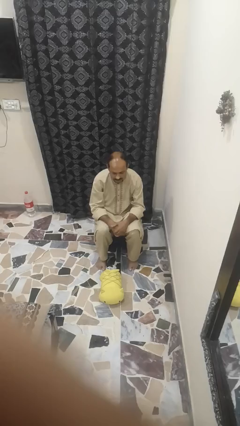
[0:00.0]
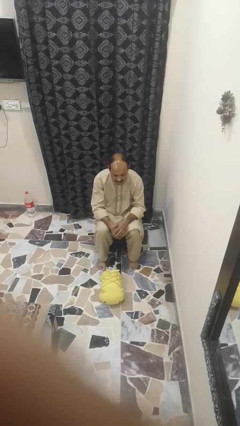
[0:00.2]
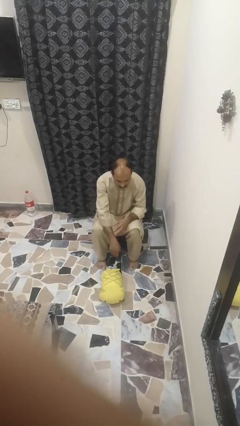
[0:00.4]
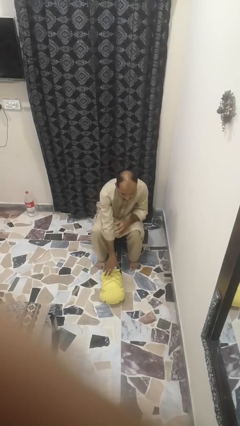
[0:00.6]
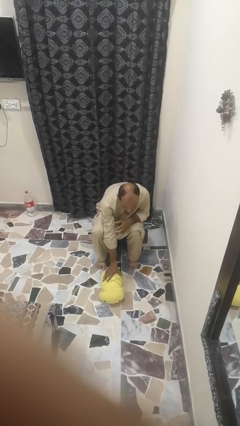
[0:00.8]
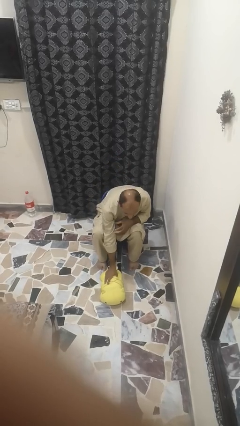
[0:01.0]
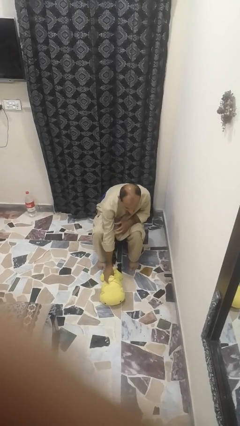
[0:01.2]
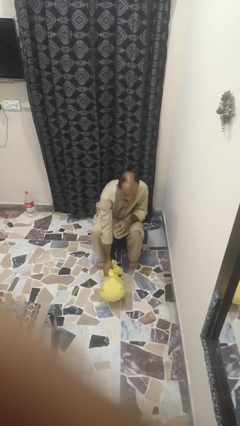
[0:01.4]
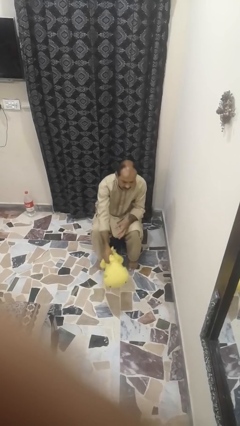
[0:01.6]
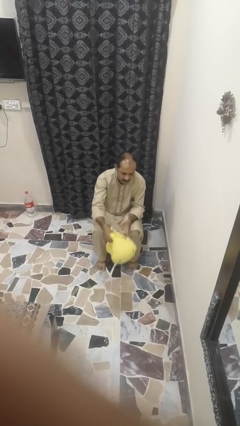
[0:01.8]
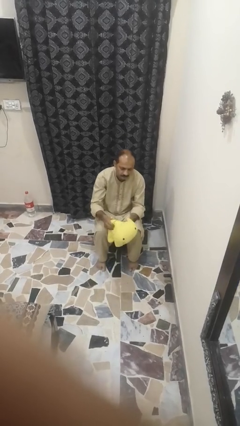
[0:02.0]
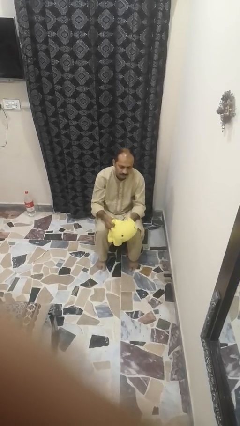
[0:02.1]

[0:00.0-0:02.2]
person picks up object from floor

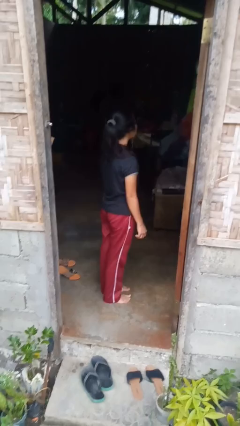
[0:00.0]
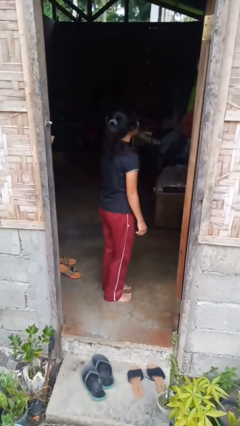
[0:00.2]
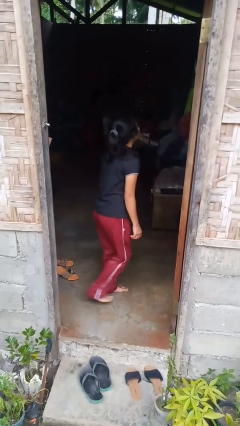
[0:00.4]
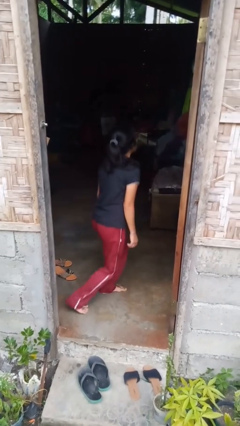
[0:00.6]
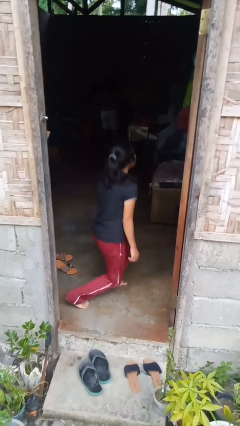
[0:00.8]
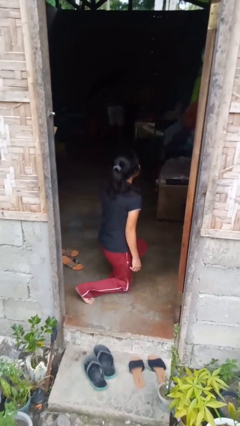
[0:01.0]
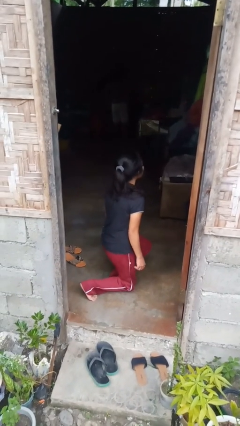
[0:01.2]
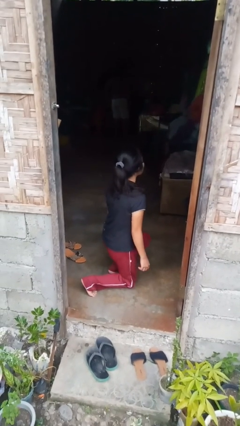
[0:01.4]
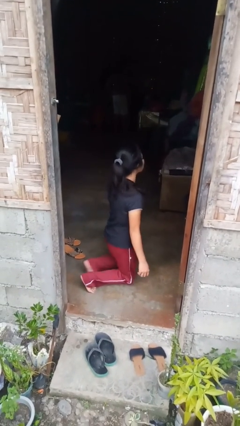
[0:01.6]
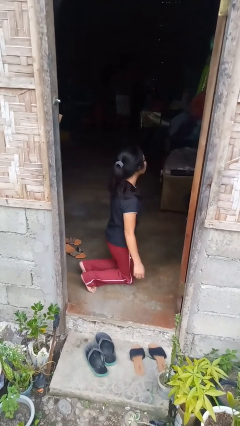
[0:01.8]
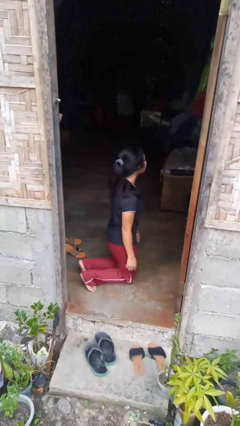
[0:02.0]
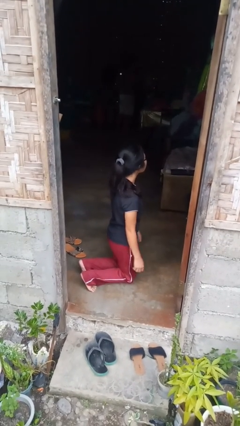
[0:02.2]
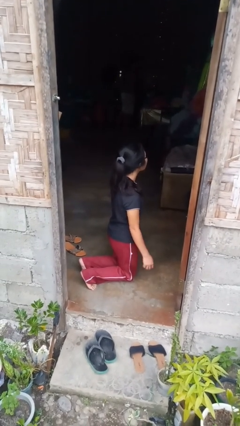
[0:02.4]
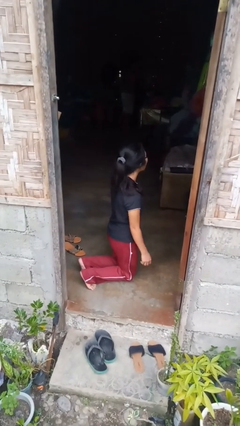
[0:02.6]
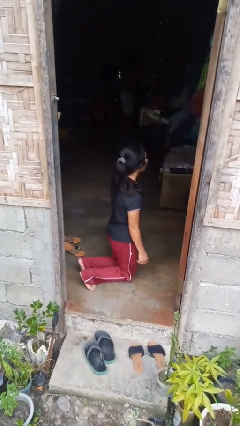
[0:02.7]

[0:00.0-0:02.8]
person kneels

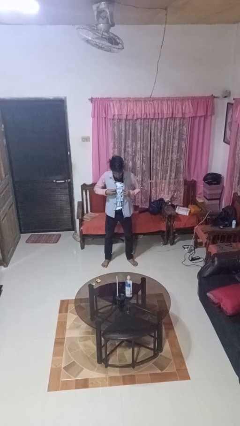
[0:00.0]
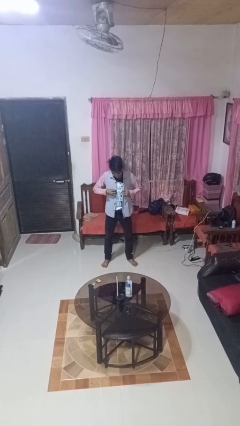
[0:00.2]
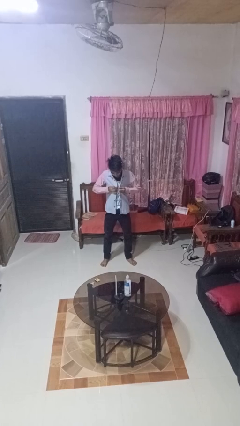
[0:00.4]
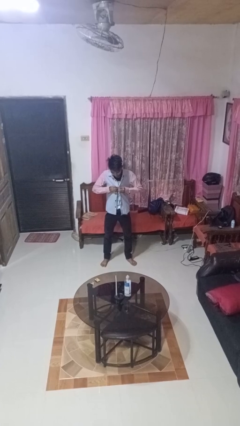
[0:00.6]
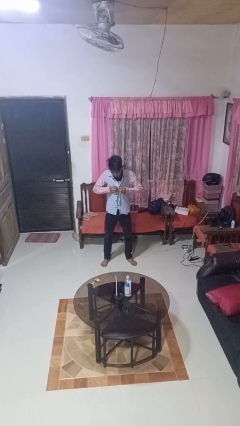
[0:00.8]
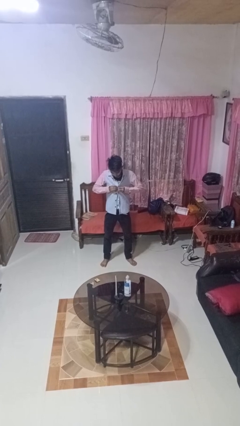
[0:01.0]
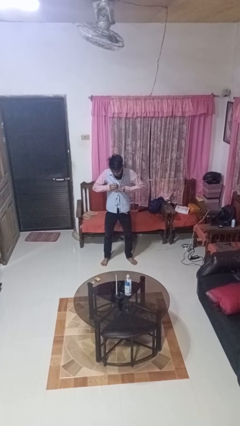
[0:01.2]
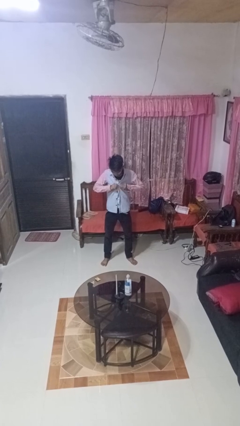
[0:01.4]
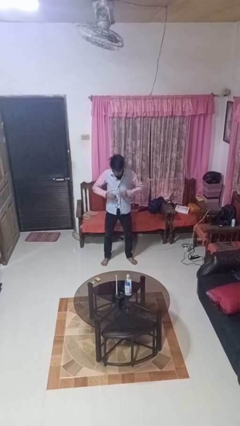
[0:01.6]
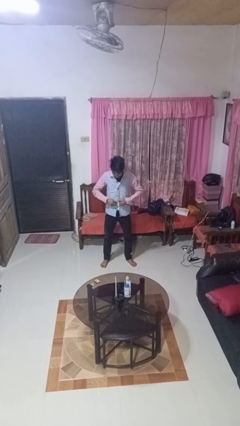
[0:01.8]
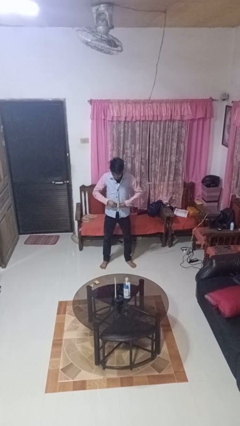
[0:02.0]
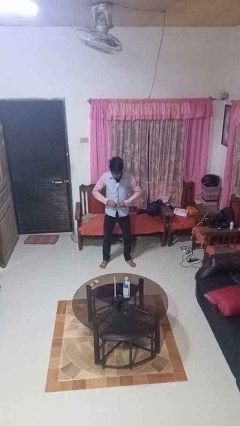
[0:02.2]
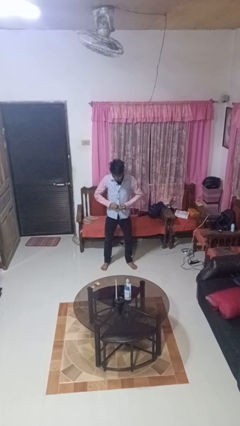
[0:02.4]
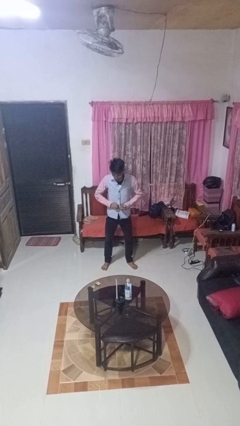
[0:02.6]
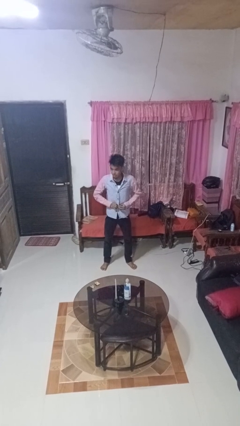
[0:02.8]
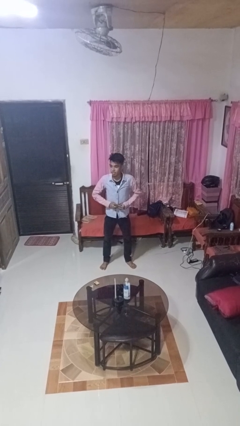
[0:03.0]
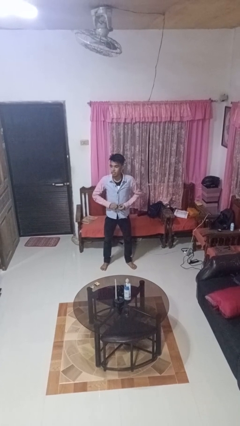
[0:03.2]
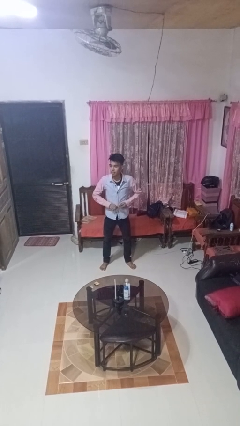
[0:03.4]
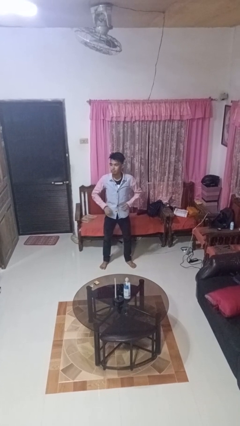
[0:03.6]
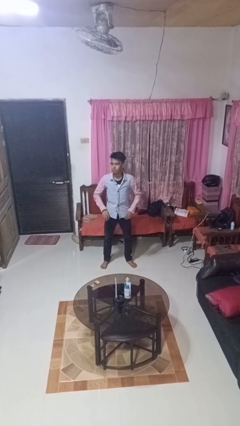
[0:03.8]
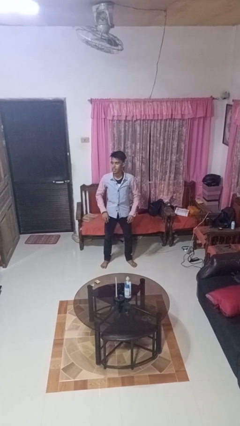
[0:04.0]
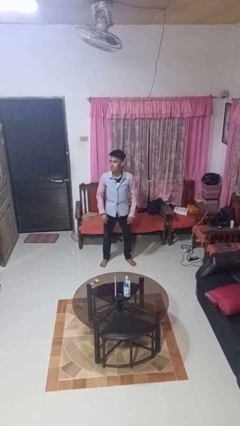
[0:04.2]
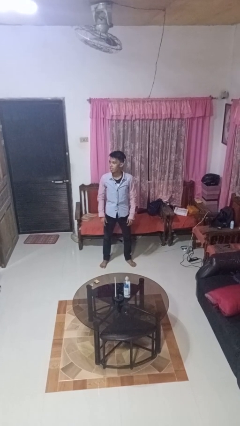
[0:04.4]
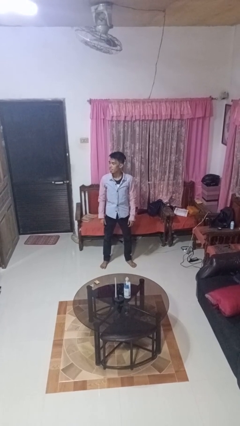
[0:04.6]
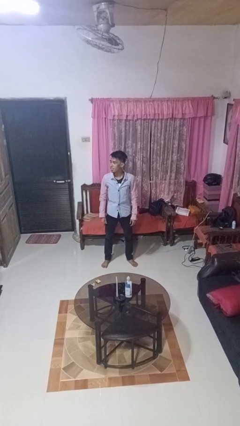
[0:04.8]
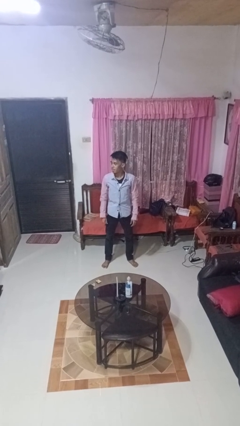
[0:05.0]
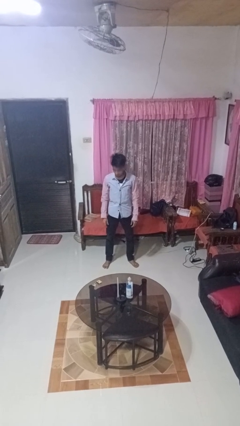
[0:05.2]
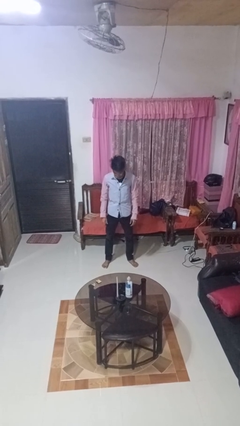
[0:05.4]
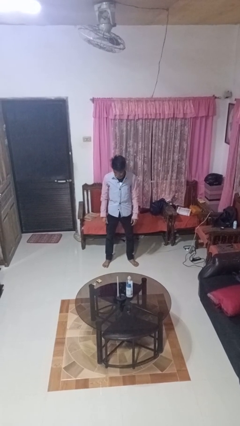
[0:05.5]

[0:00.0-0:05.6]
person buttons shirt

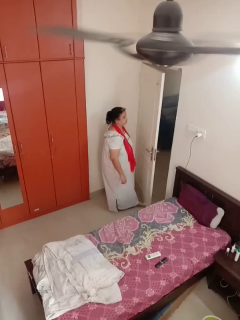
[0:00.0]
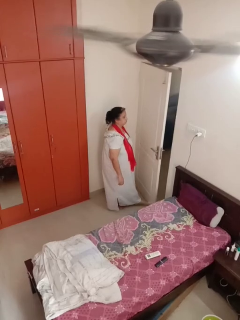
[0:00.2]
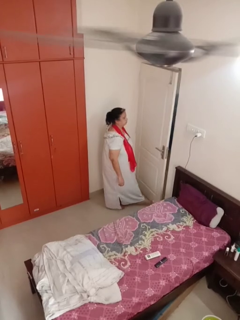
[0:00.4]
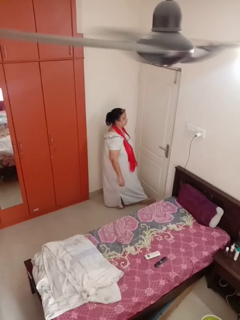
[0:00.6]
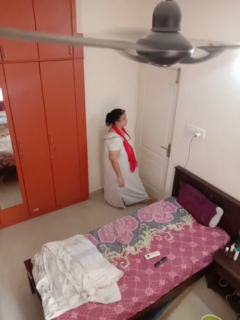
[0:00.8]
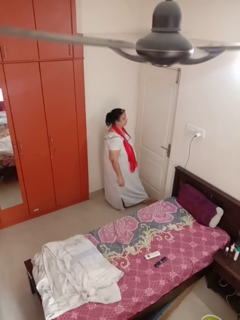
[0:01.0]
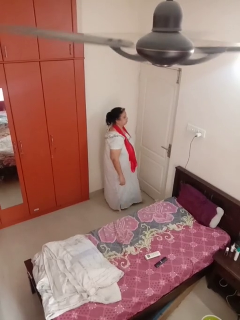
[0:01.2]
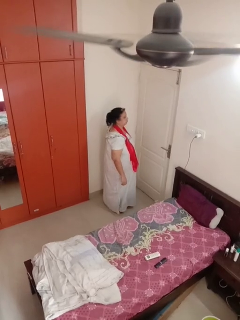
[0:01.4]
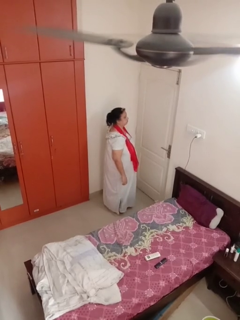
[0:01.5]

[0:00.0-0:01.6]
person closes door with foot

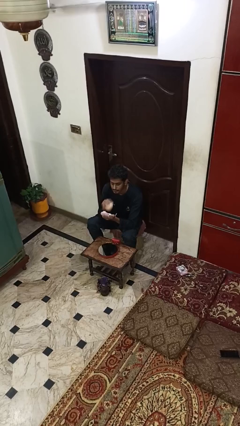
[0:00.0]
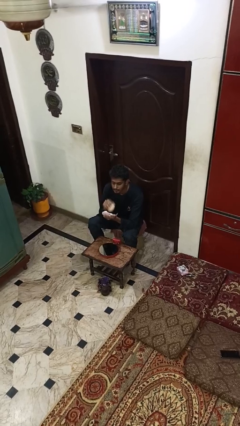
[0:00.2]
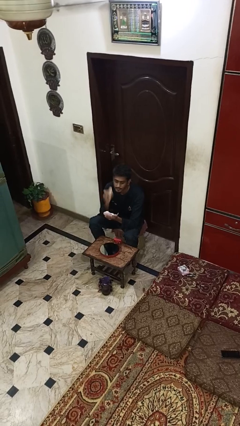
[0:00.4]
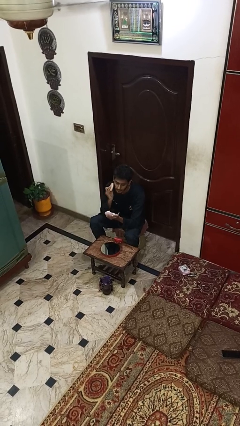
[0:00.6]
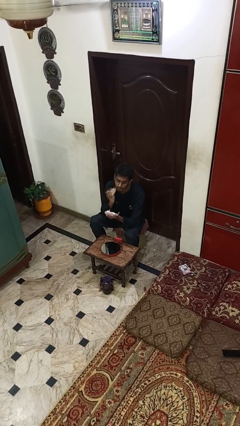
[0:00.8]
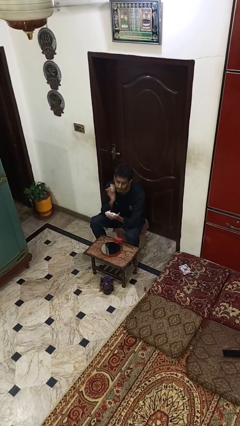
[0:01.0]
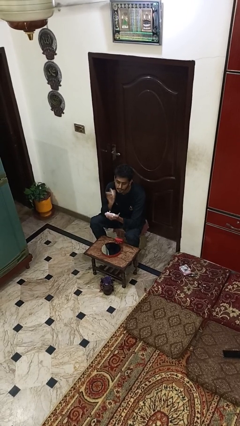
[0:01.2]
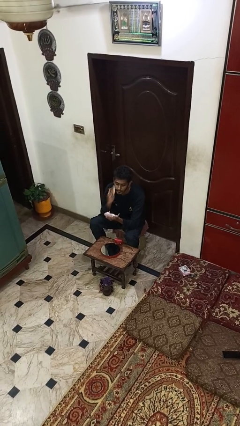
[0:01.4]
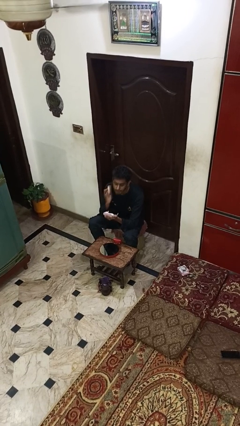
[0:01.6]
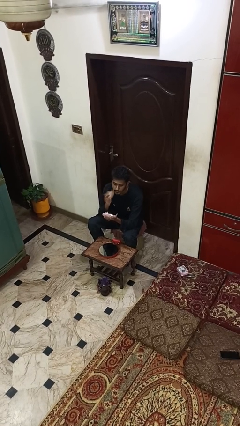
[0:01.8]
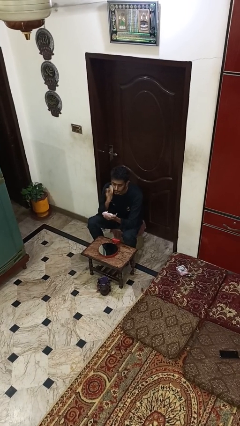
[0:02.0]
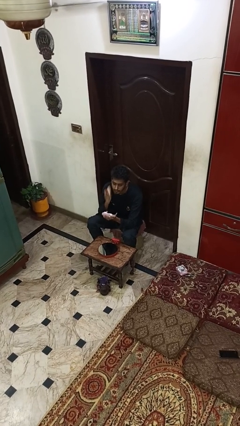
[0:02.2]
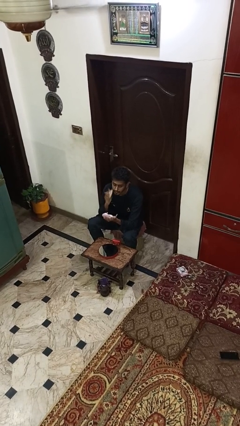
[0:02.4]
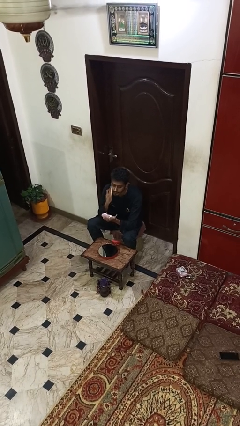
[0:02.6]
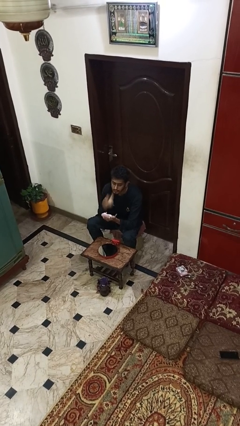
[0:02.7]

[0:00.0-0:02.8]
person applies foundation makeup

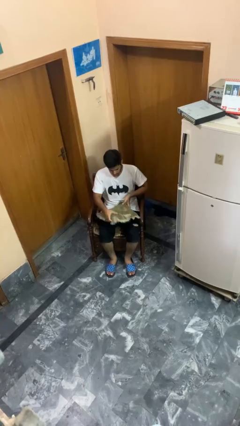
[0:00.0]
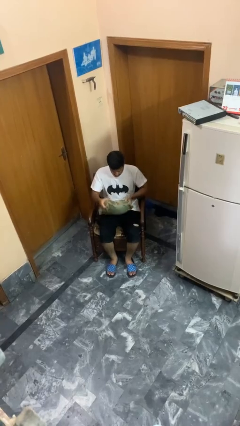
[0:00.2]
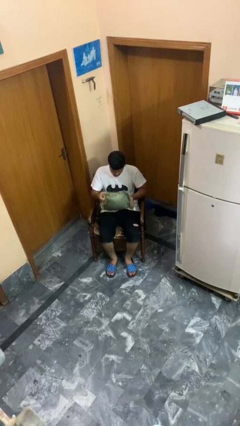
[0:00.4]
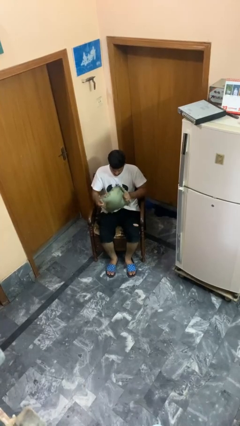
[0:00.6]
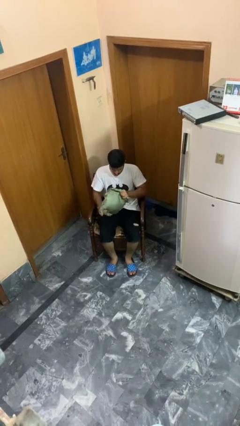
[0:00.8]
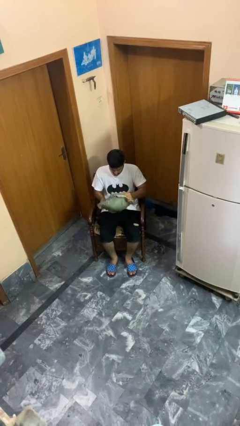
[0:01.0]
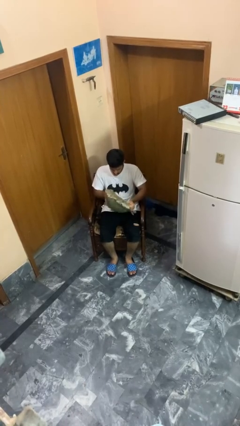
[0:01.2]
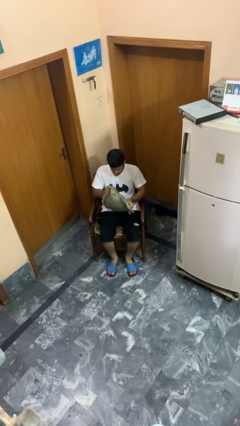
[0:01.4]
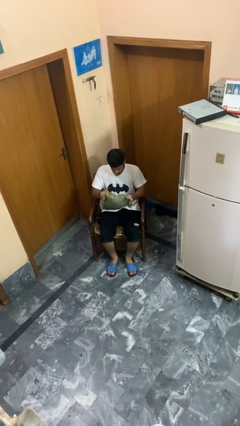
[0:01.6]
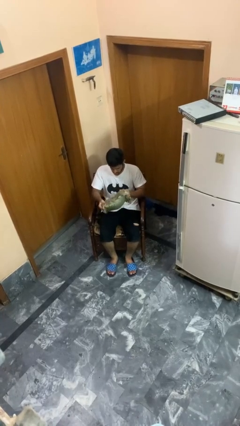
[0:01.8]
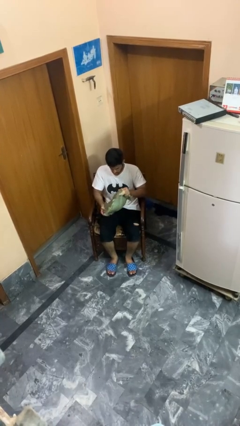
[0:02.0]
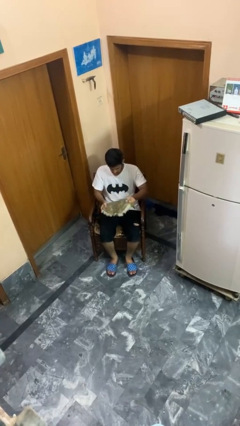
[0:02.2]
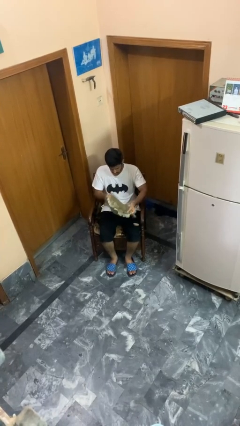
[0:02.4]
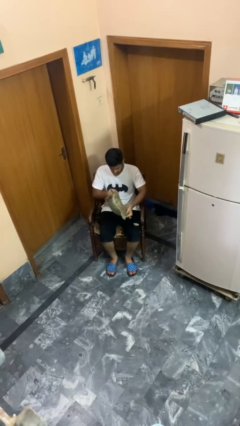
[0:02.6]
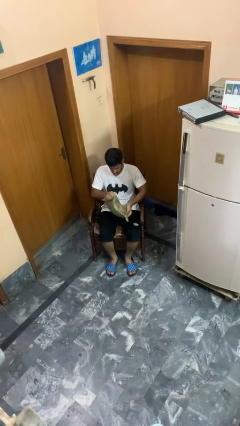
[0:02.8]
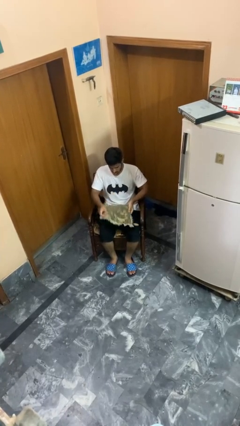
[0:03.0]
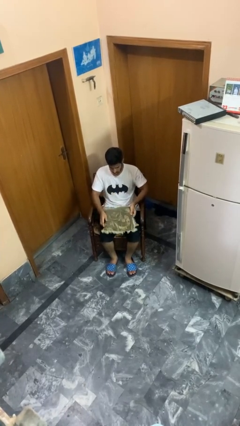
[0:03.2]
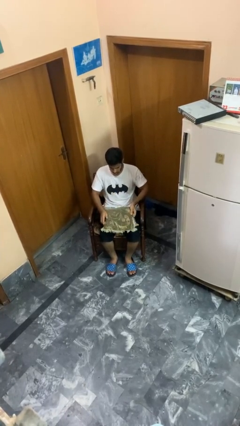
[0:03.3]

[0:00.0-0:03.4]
person squeezes object
